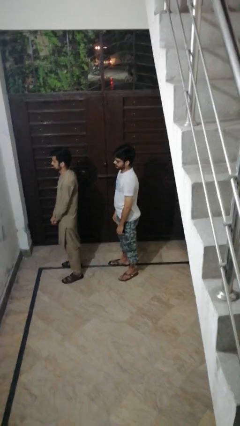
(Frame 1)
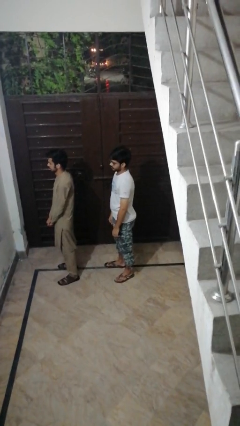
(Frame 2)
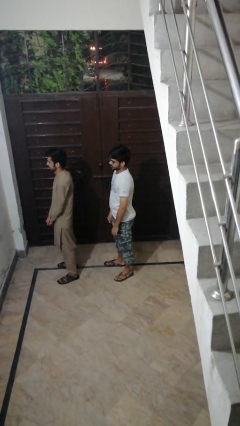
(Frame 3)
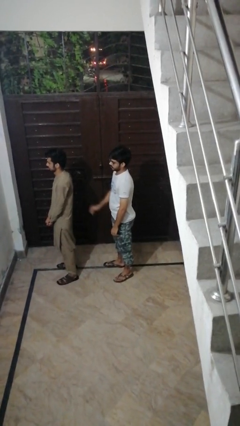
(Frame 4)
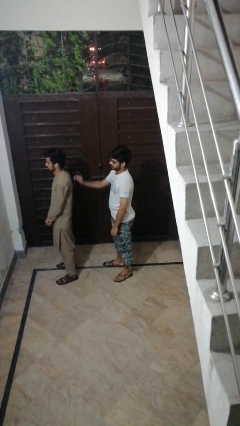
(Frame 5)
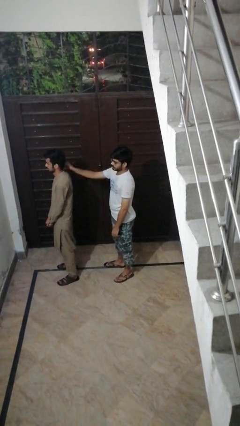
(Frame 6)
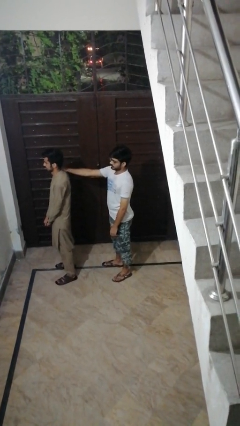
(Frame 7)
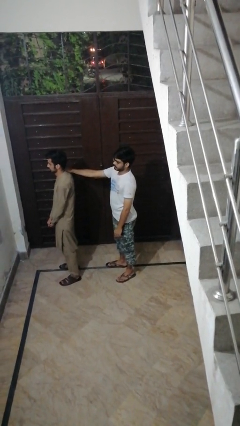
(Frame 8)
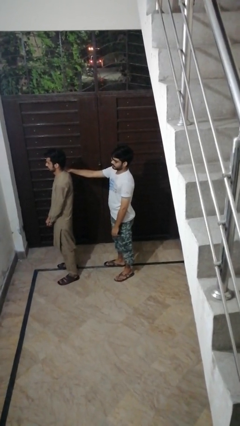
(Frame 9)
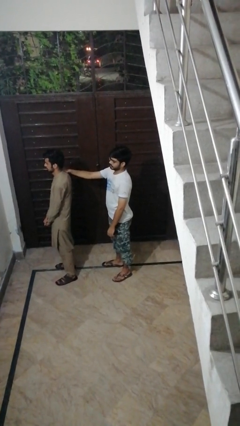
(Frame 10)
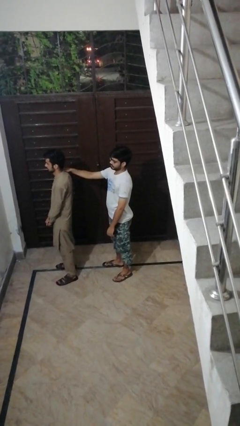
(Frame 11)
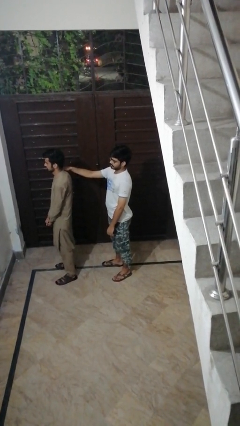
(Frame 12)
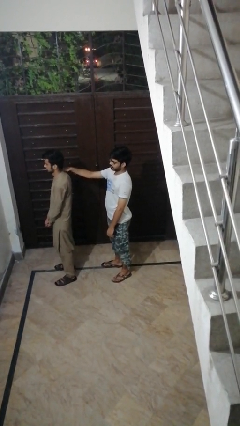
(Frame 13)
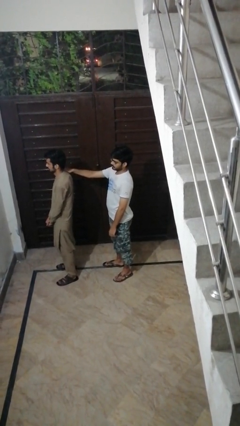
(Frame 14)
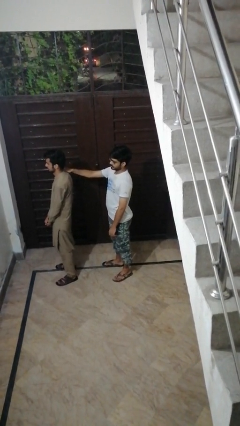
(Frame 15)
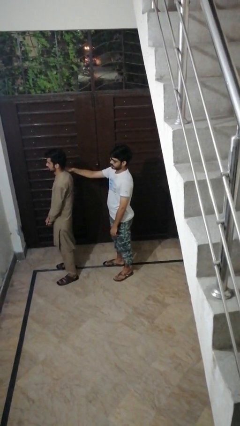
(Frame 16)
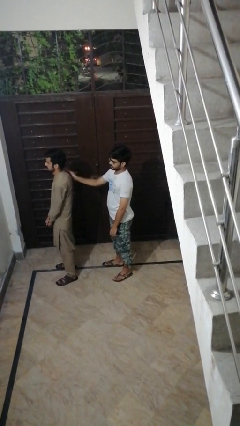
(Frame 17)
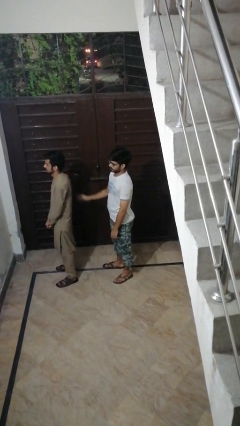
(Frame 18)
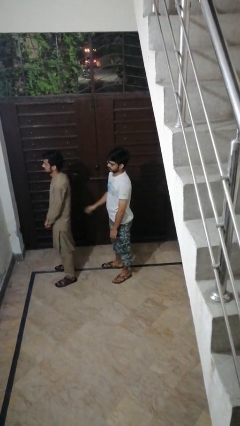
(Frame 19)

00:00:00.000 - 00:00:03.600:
person touches back of person

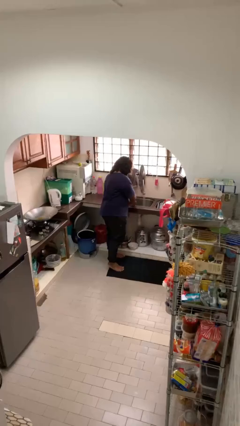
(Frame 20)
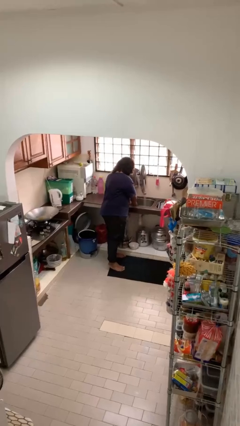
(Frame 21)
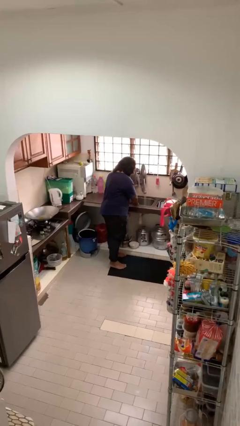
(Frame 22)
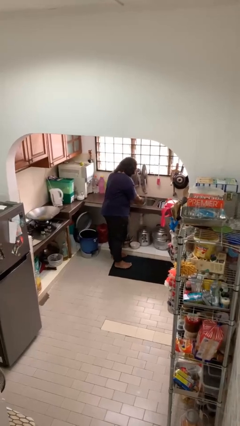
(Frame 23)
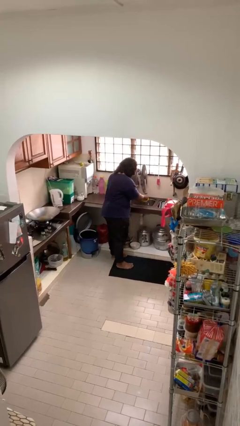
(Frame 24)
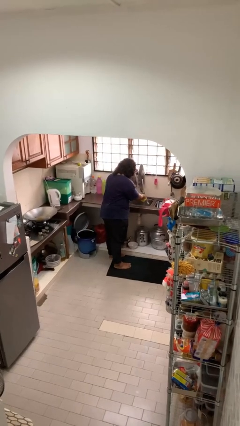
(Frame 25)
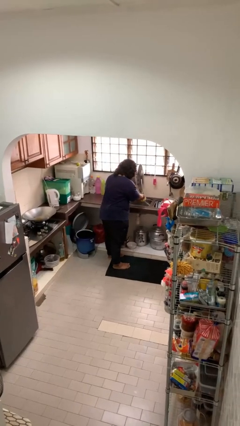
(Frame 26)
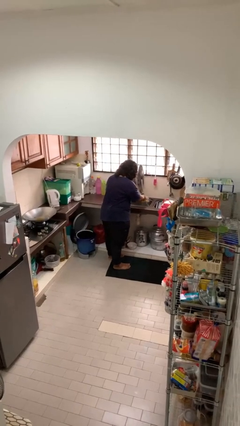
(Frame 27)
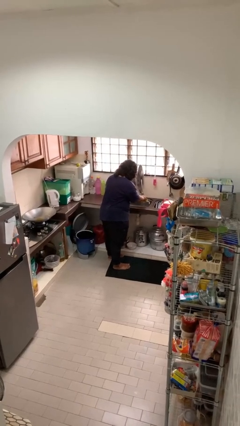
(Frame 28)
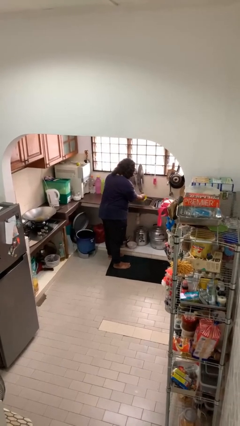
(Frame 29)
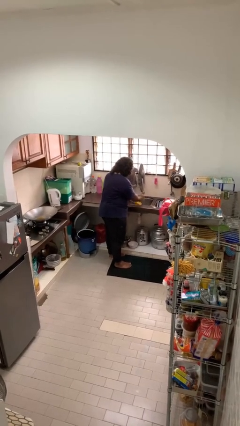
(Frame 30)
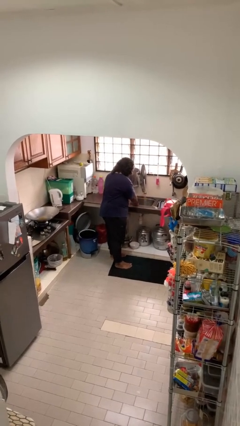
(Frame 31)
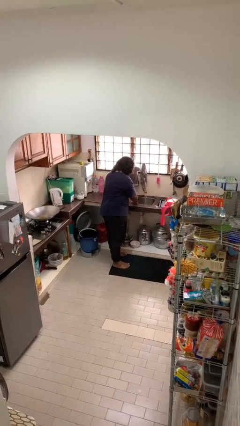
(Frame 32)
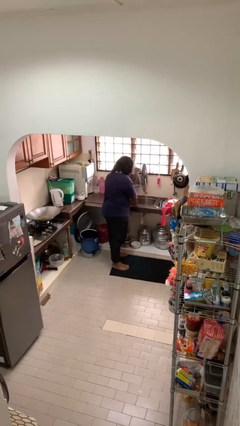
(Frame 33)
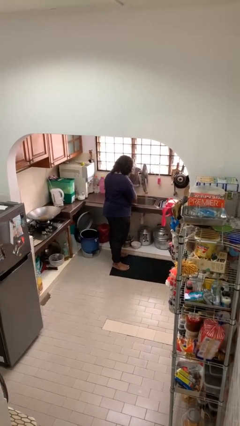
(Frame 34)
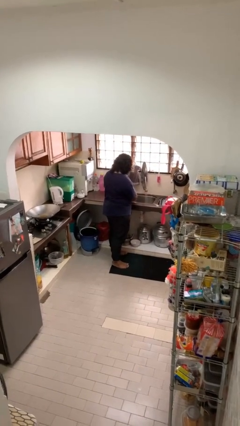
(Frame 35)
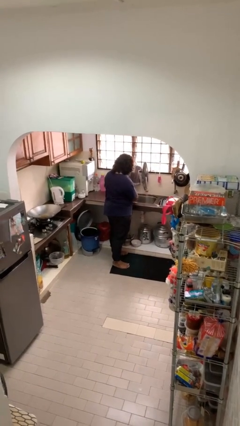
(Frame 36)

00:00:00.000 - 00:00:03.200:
person washes dish

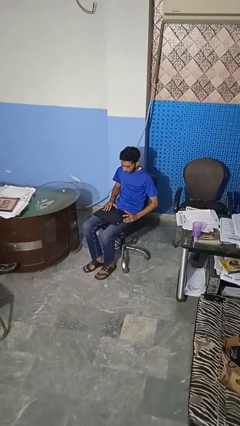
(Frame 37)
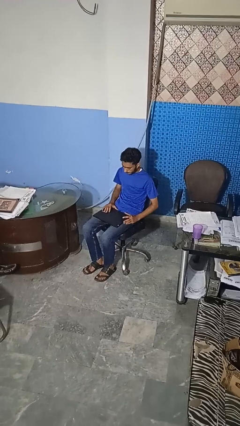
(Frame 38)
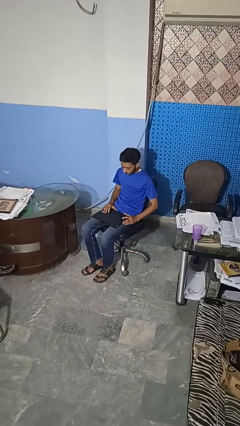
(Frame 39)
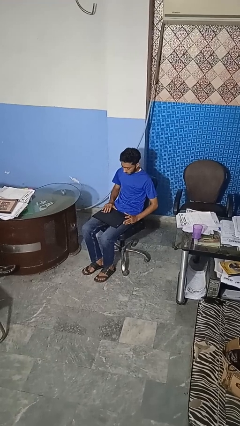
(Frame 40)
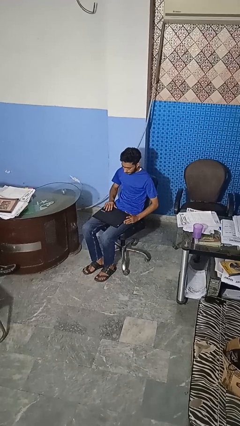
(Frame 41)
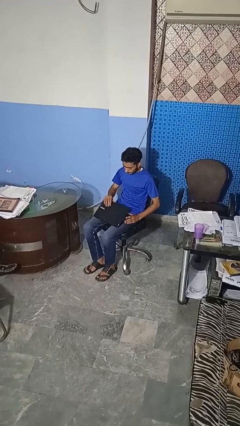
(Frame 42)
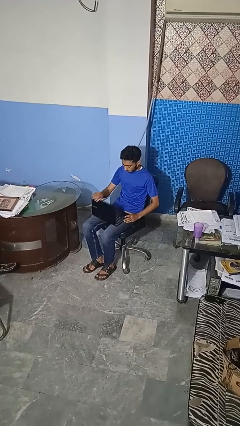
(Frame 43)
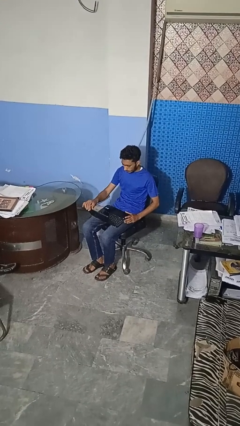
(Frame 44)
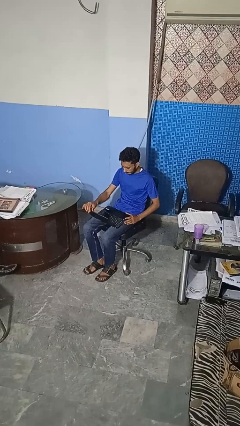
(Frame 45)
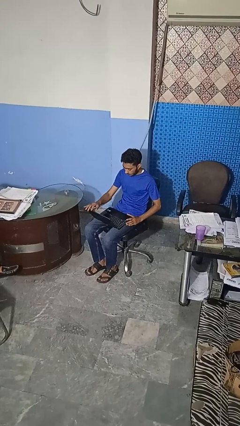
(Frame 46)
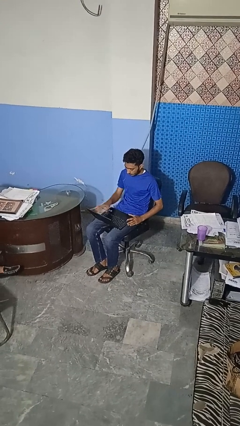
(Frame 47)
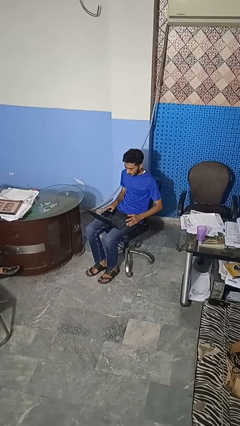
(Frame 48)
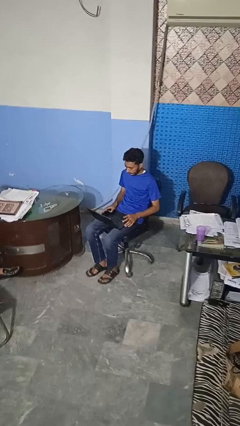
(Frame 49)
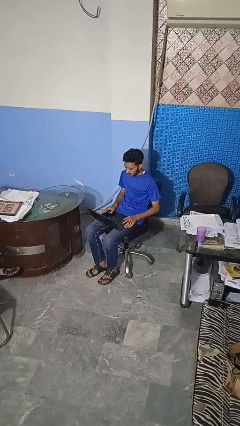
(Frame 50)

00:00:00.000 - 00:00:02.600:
person opens laptop

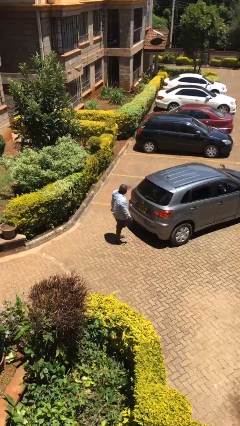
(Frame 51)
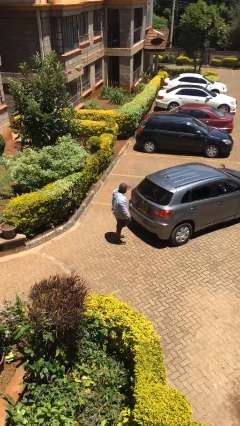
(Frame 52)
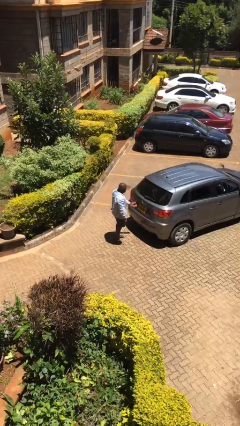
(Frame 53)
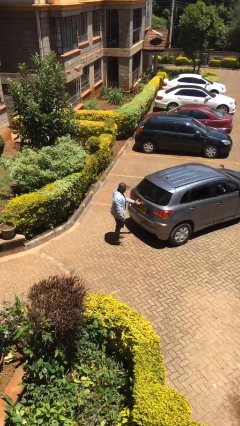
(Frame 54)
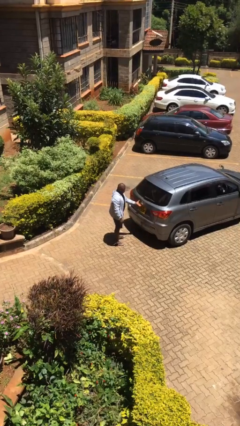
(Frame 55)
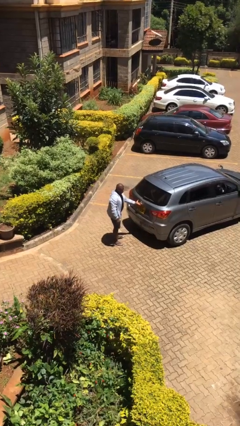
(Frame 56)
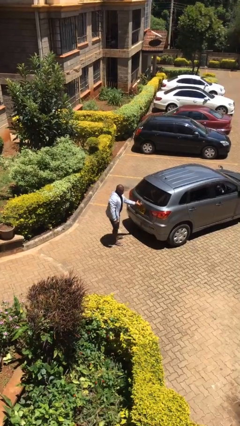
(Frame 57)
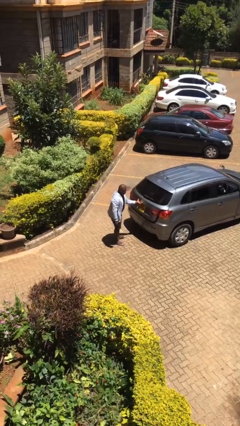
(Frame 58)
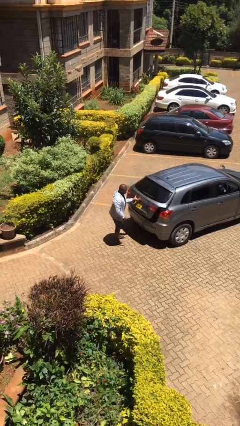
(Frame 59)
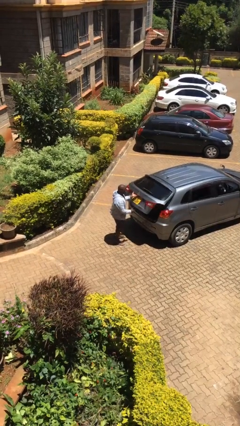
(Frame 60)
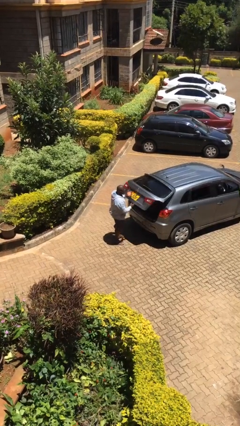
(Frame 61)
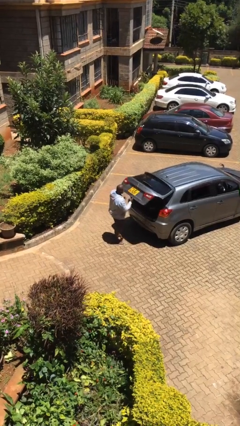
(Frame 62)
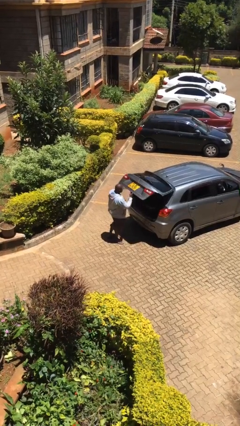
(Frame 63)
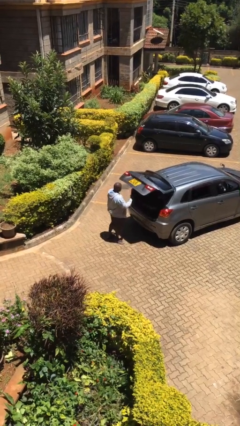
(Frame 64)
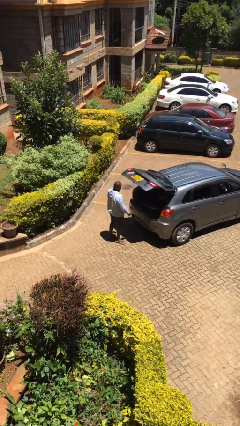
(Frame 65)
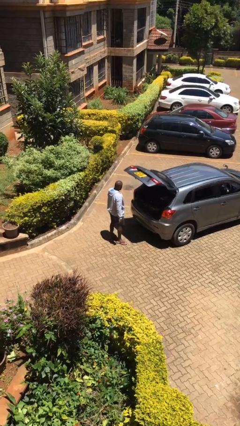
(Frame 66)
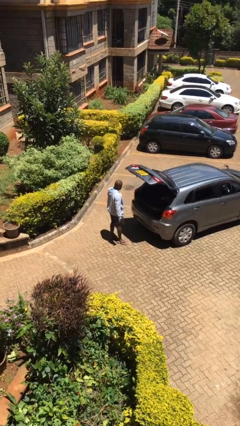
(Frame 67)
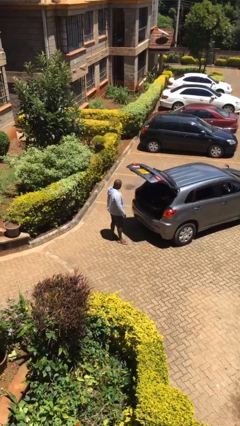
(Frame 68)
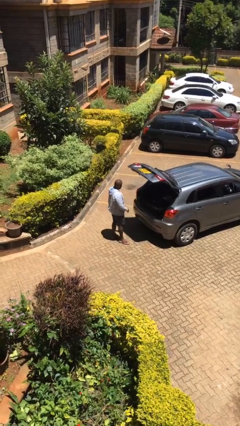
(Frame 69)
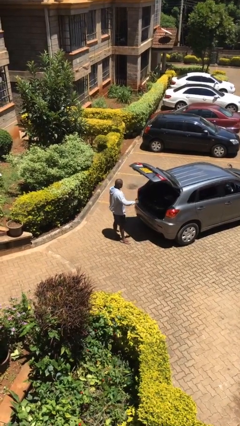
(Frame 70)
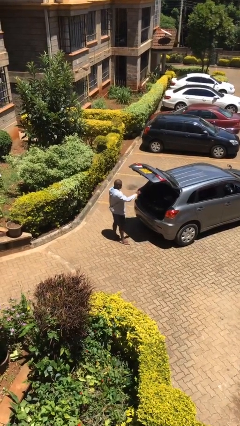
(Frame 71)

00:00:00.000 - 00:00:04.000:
person opens car trunk

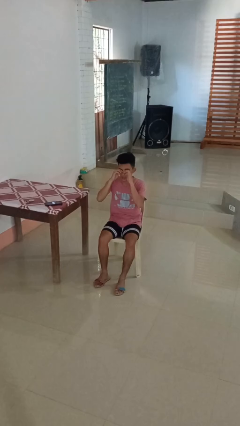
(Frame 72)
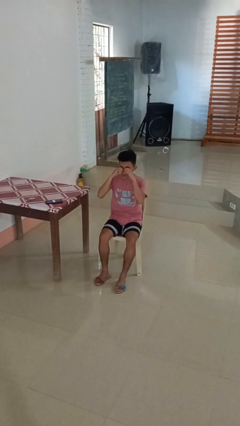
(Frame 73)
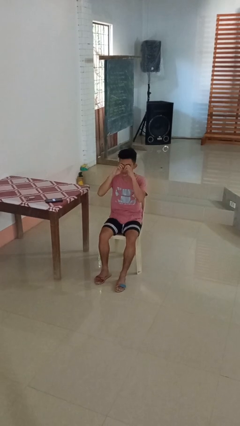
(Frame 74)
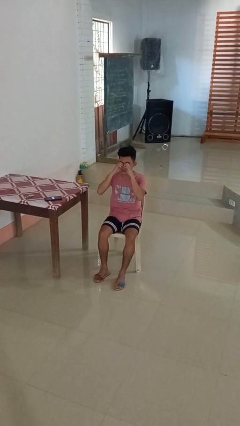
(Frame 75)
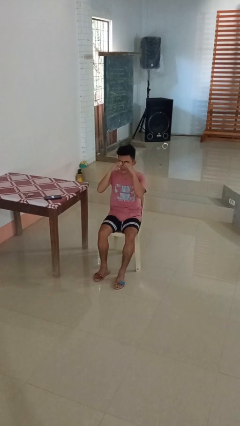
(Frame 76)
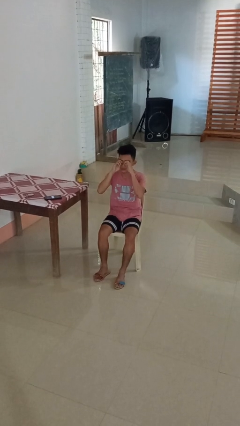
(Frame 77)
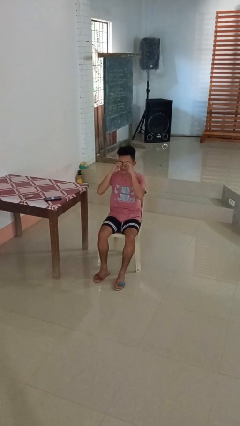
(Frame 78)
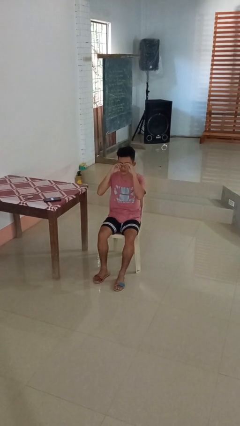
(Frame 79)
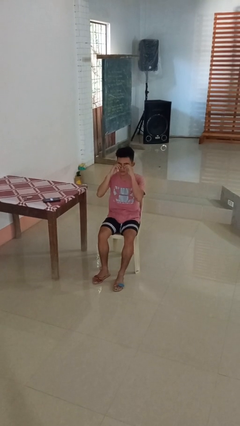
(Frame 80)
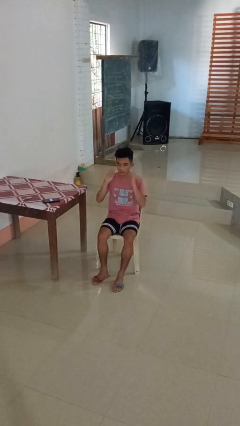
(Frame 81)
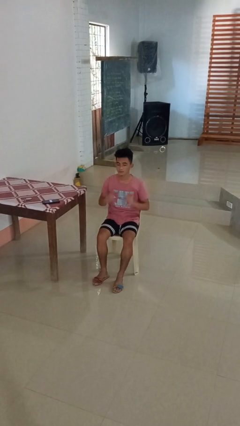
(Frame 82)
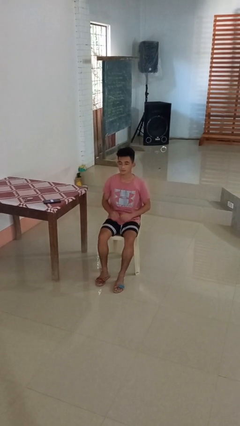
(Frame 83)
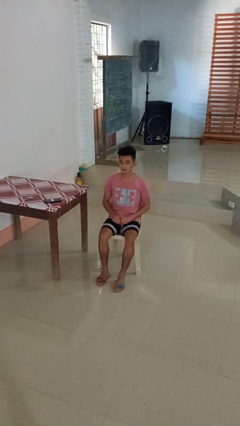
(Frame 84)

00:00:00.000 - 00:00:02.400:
person rubs eyes

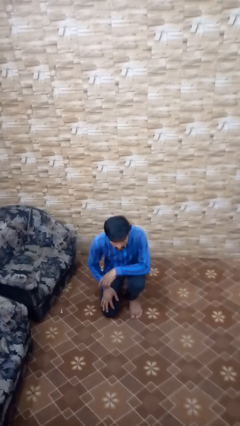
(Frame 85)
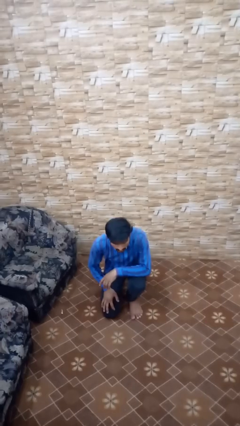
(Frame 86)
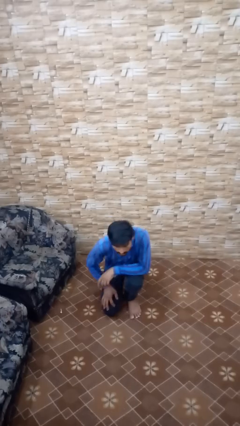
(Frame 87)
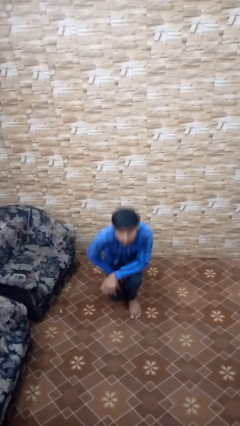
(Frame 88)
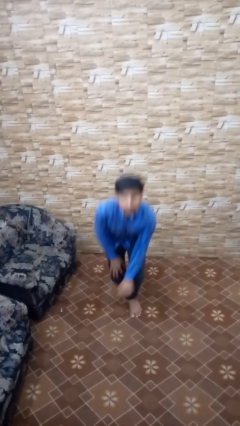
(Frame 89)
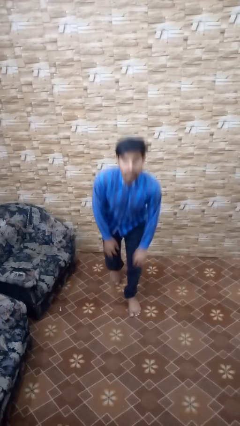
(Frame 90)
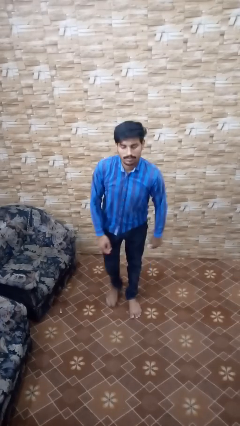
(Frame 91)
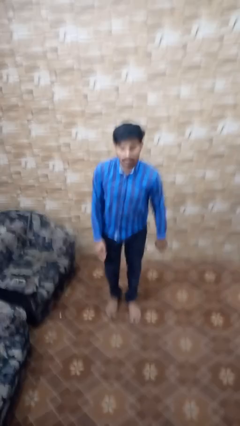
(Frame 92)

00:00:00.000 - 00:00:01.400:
person stands up from floor
